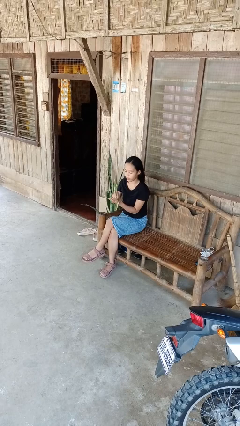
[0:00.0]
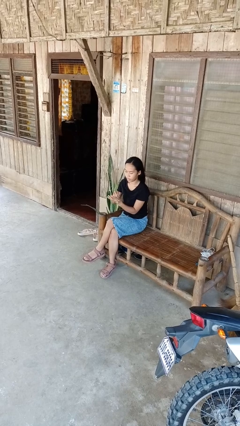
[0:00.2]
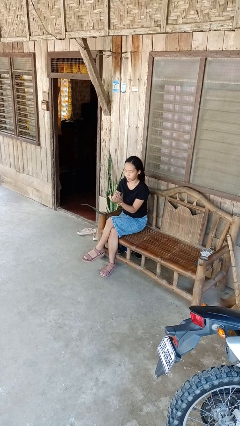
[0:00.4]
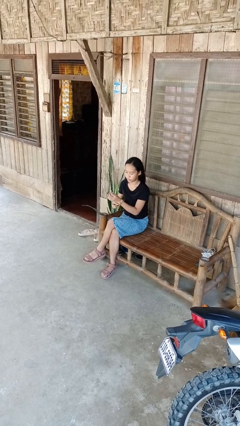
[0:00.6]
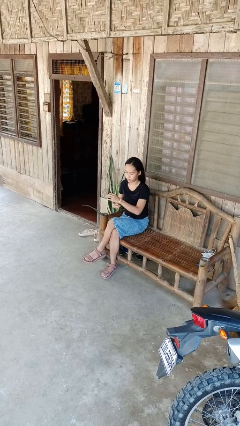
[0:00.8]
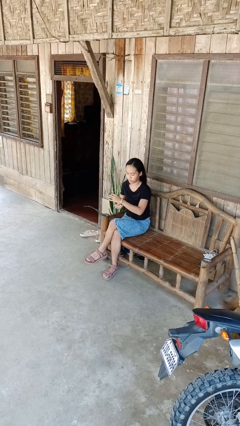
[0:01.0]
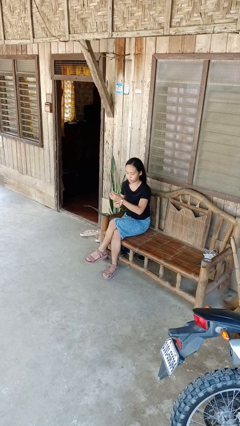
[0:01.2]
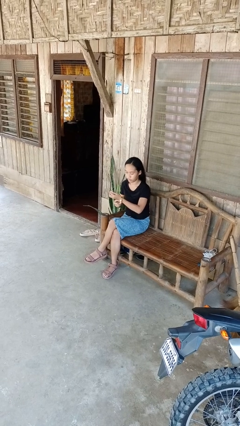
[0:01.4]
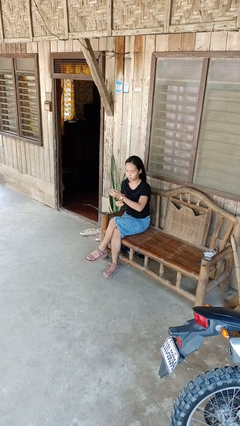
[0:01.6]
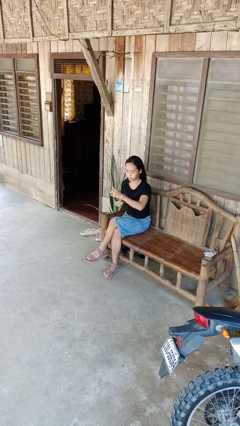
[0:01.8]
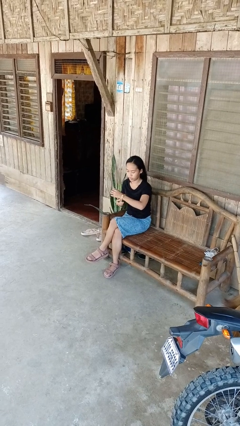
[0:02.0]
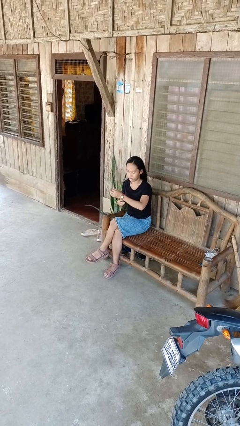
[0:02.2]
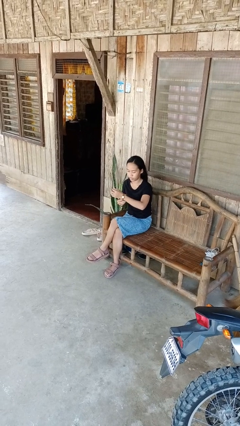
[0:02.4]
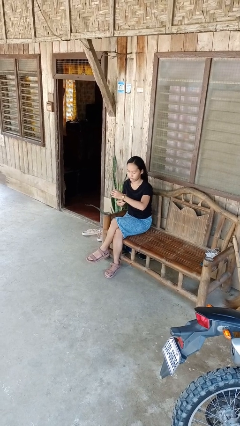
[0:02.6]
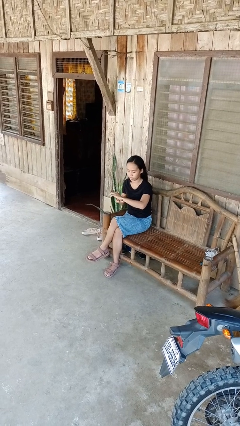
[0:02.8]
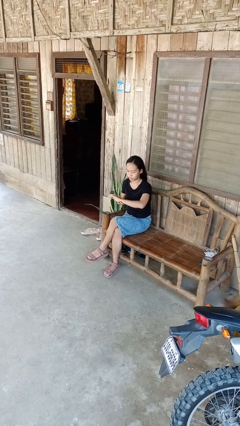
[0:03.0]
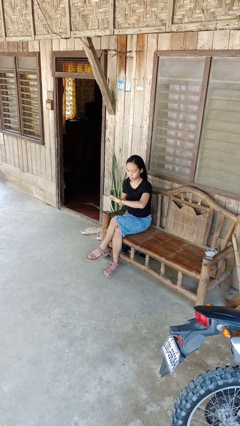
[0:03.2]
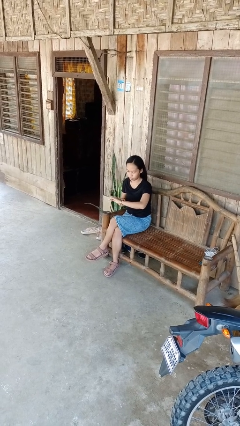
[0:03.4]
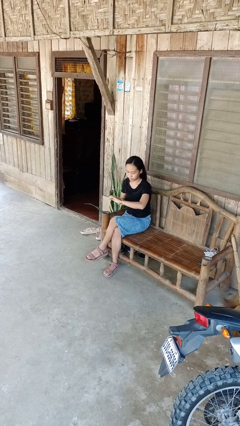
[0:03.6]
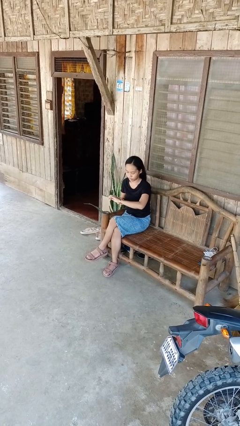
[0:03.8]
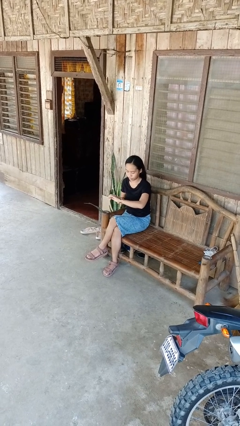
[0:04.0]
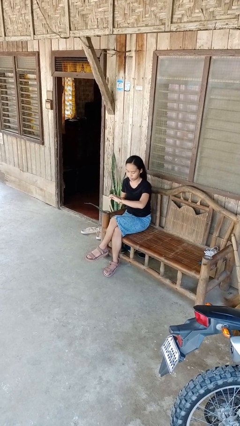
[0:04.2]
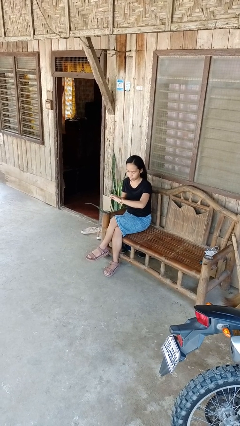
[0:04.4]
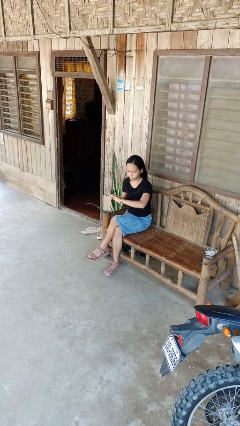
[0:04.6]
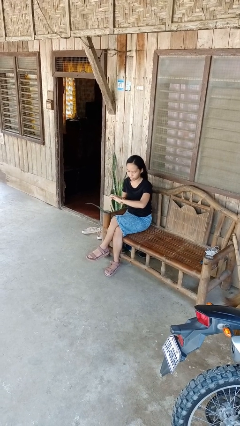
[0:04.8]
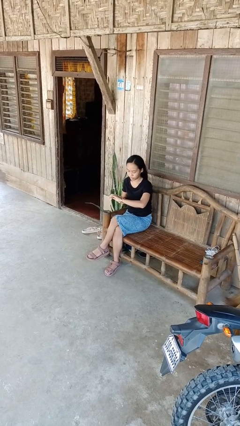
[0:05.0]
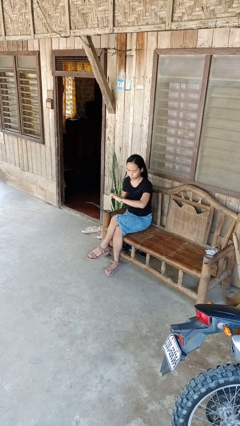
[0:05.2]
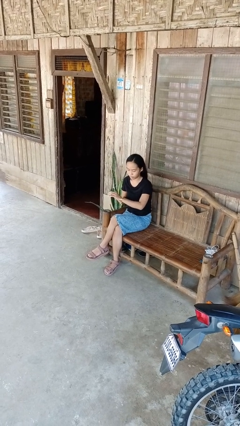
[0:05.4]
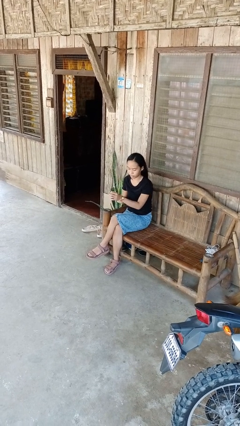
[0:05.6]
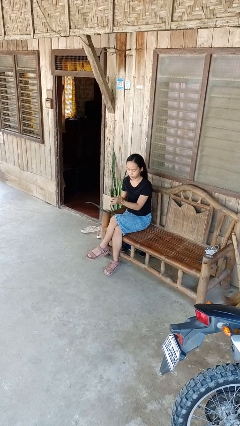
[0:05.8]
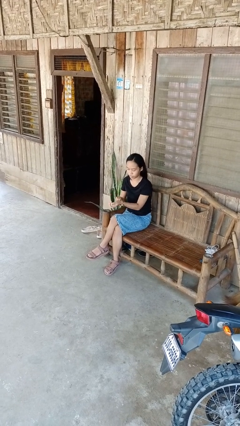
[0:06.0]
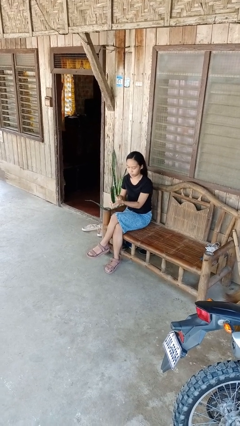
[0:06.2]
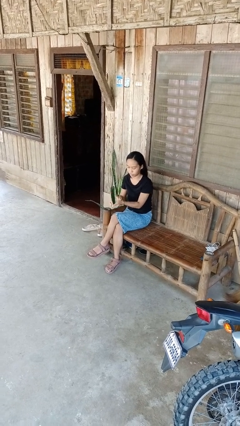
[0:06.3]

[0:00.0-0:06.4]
person puts on wristwatch

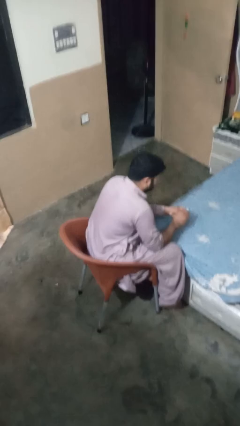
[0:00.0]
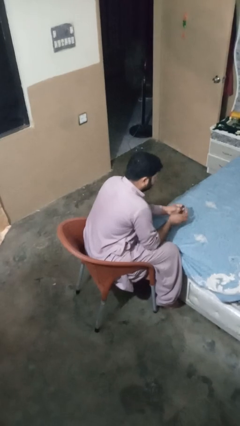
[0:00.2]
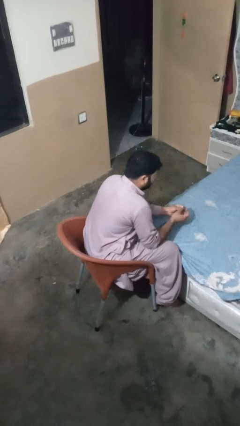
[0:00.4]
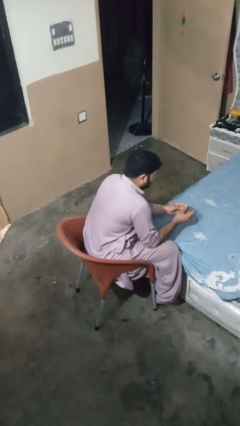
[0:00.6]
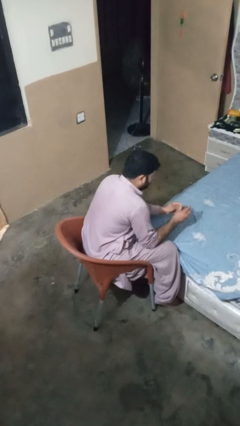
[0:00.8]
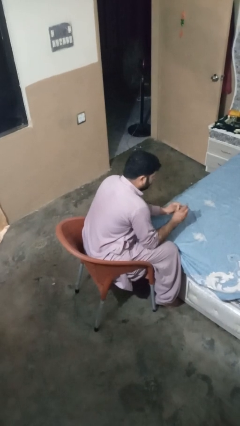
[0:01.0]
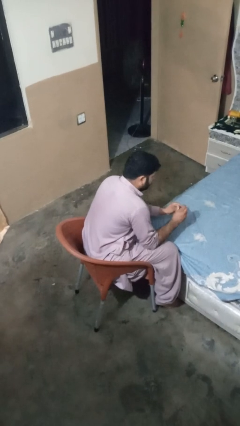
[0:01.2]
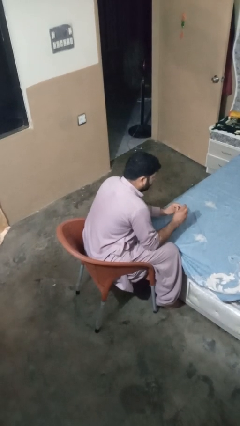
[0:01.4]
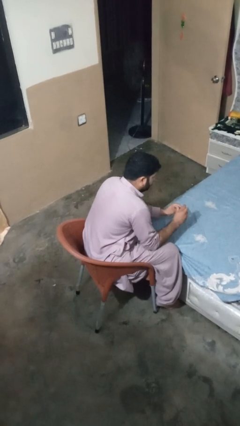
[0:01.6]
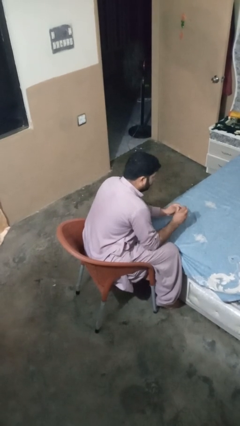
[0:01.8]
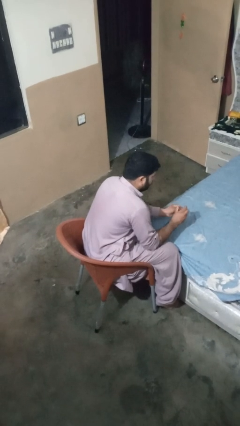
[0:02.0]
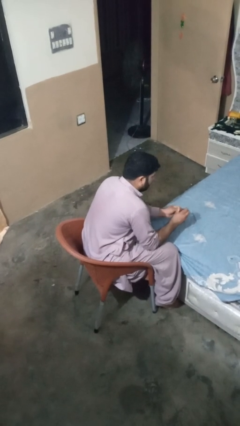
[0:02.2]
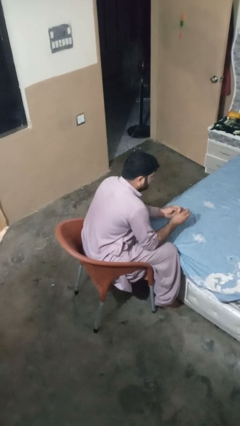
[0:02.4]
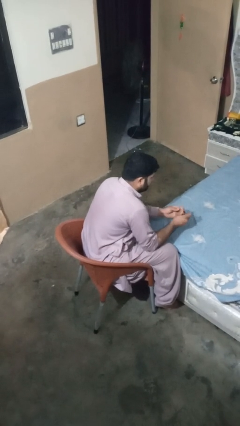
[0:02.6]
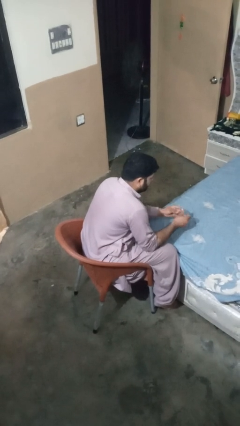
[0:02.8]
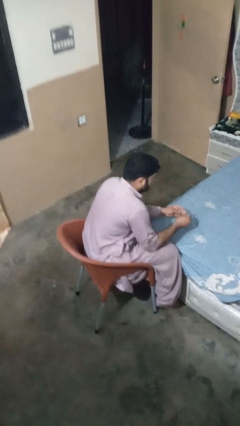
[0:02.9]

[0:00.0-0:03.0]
person clips fingernails

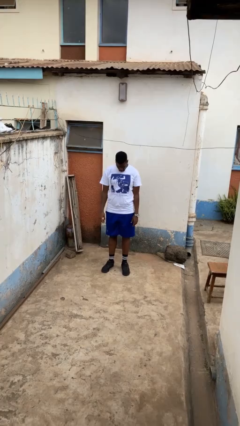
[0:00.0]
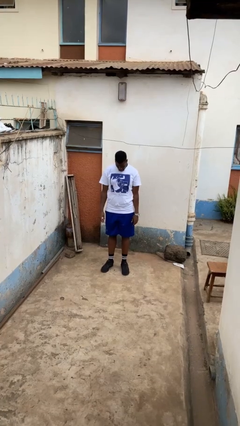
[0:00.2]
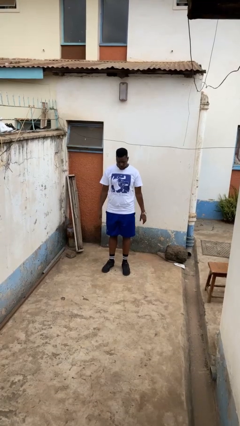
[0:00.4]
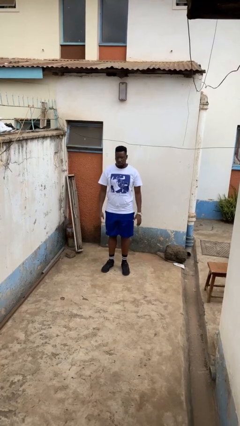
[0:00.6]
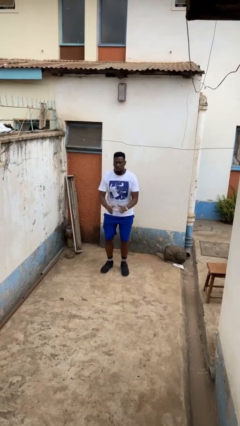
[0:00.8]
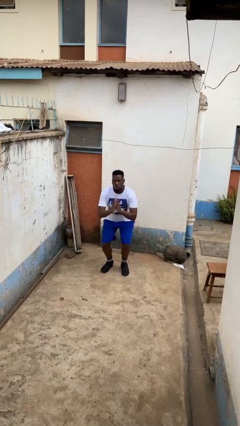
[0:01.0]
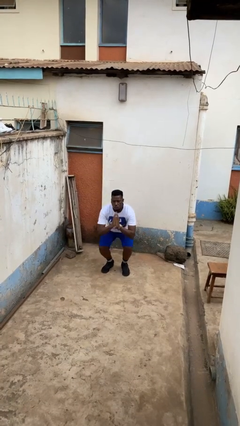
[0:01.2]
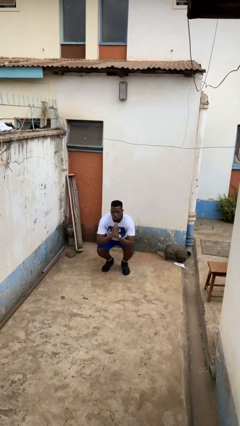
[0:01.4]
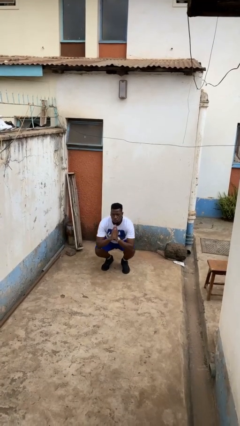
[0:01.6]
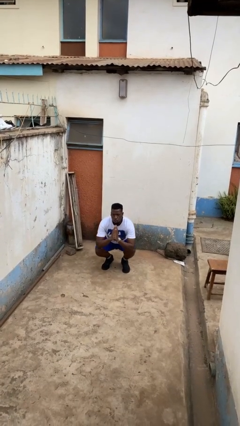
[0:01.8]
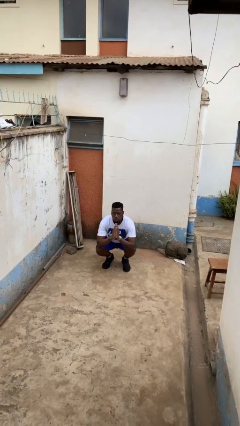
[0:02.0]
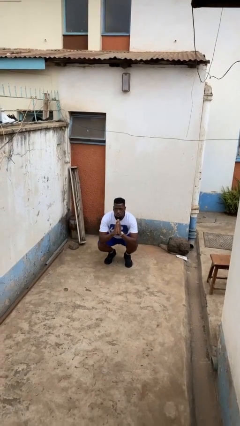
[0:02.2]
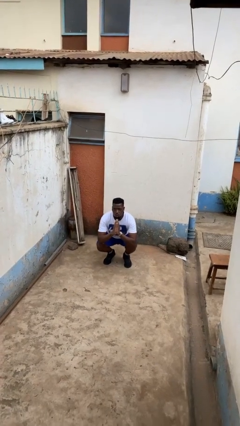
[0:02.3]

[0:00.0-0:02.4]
person squats

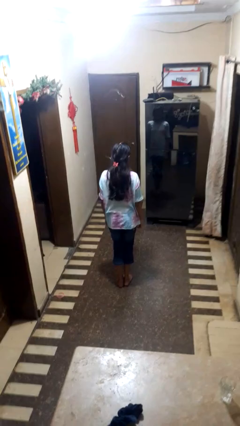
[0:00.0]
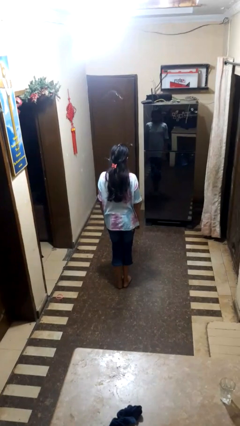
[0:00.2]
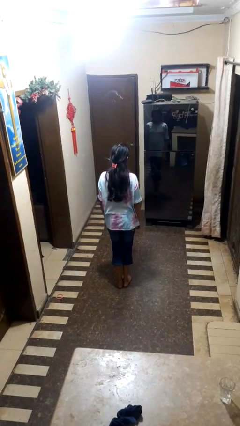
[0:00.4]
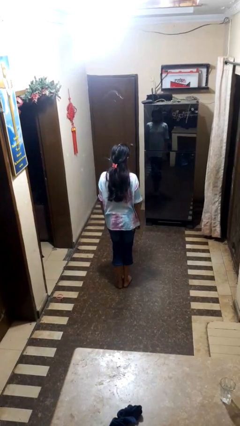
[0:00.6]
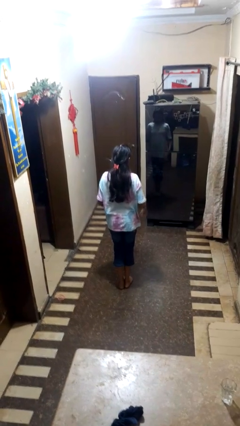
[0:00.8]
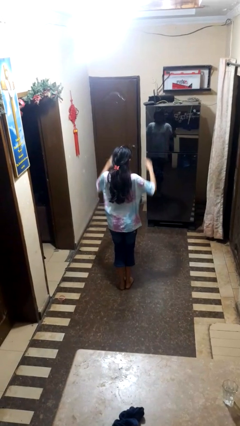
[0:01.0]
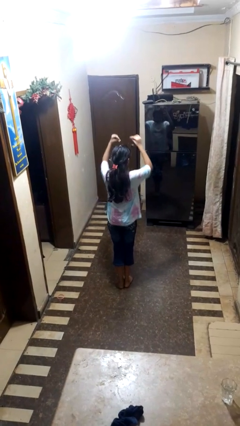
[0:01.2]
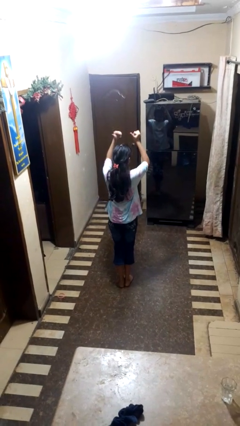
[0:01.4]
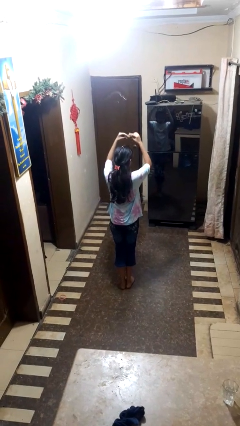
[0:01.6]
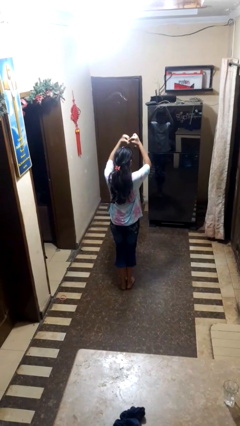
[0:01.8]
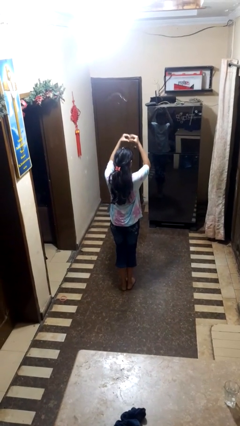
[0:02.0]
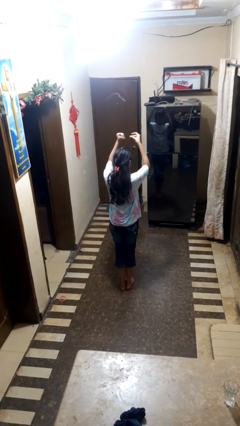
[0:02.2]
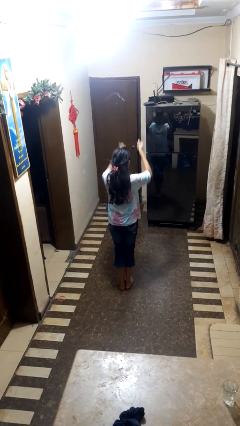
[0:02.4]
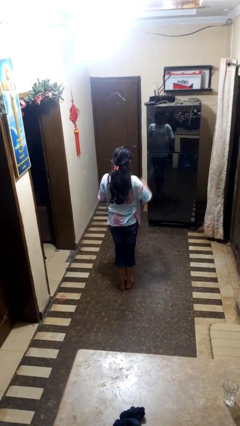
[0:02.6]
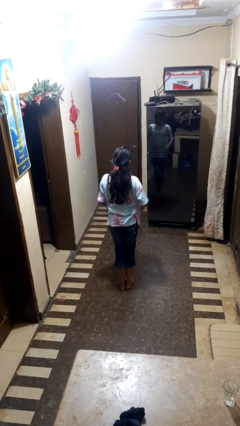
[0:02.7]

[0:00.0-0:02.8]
person snaps fingers

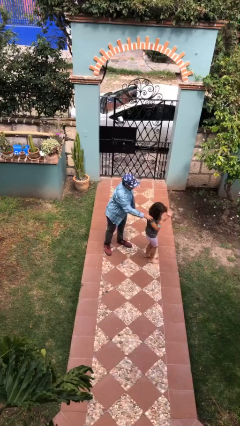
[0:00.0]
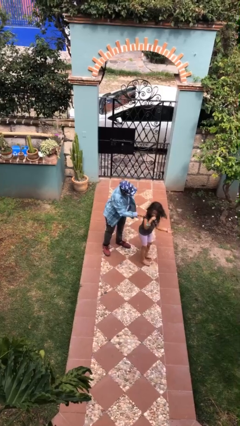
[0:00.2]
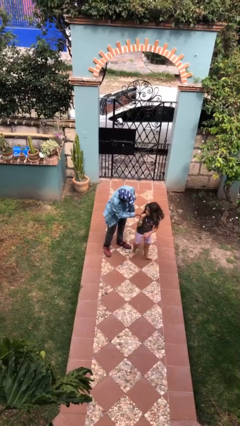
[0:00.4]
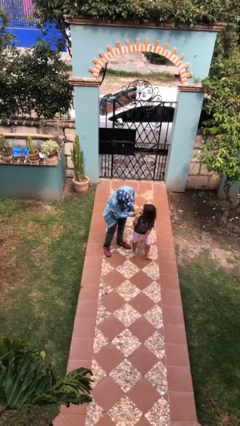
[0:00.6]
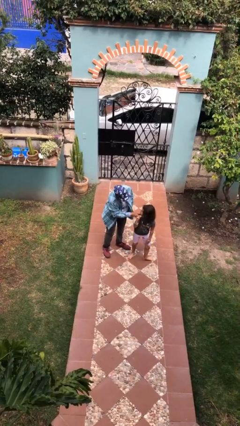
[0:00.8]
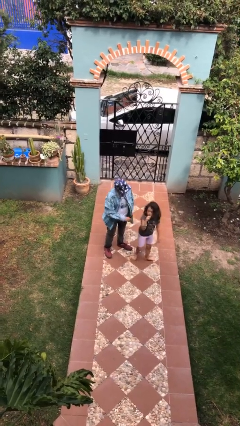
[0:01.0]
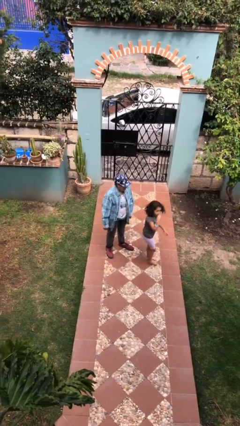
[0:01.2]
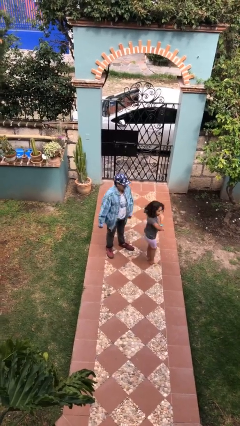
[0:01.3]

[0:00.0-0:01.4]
person spins person around

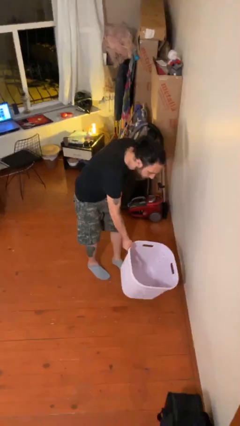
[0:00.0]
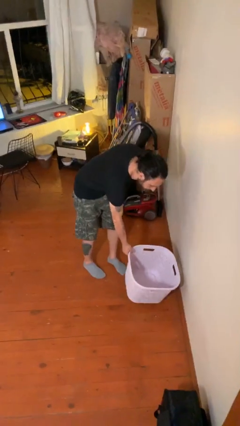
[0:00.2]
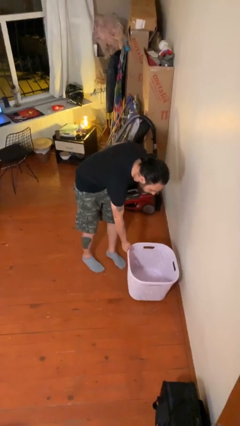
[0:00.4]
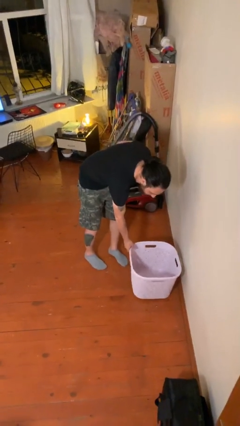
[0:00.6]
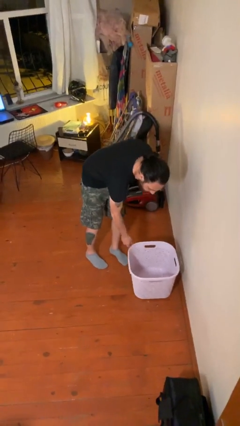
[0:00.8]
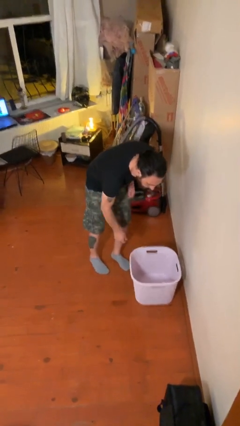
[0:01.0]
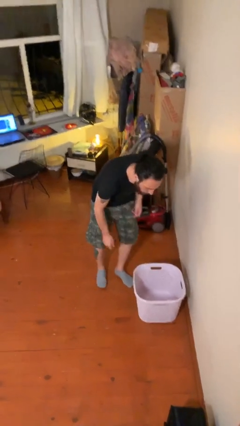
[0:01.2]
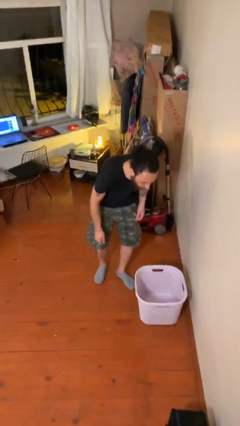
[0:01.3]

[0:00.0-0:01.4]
person puts down object on floor

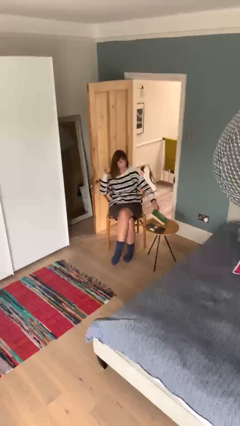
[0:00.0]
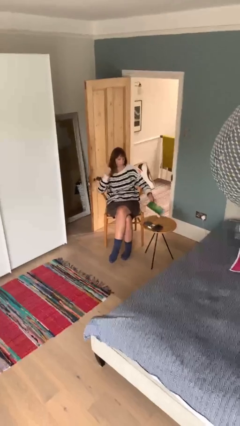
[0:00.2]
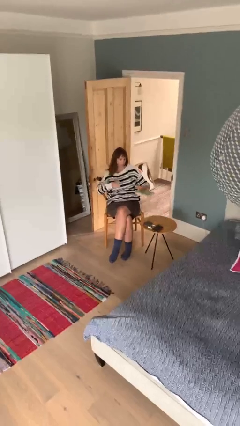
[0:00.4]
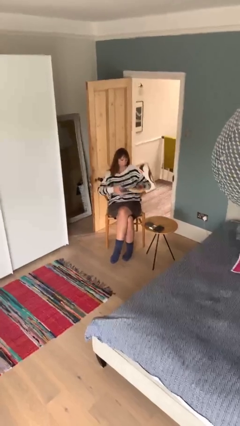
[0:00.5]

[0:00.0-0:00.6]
person picks up object from table
